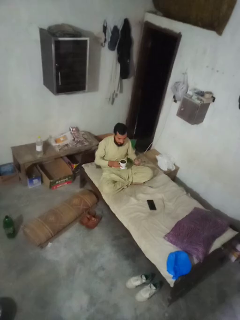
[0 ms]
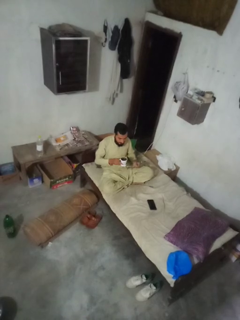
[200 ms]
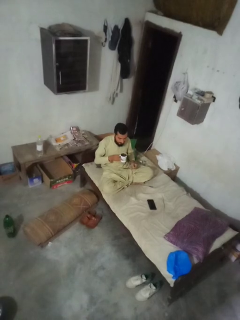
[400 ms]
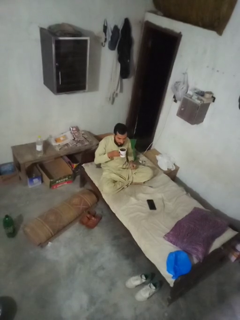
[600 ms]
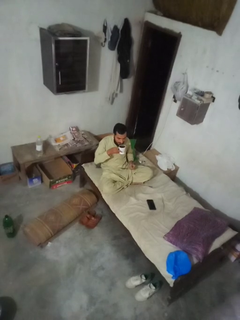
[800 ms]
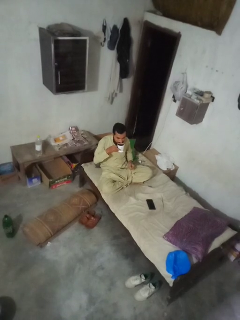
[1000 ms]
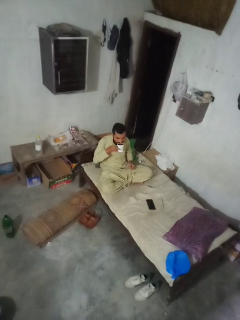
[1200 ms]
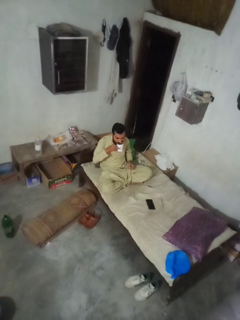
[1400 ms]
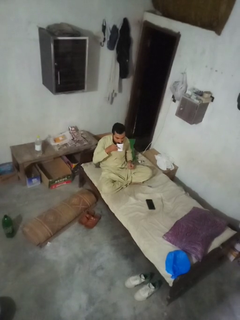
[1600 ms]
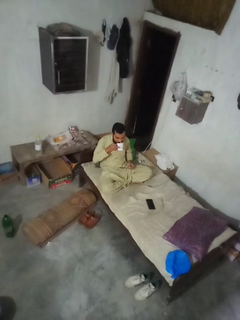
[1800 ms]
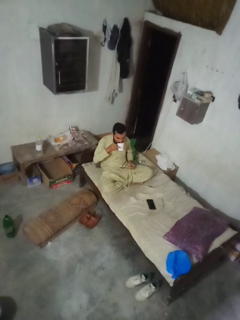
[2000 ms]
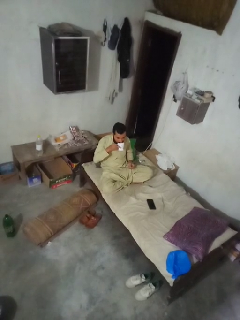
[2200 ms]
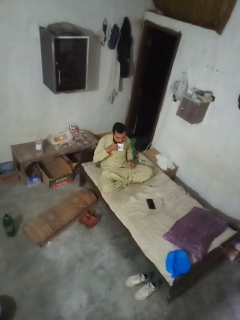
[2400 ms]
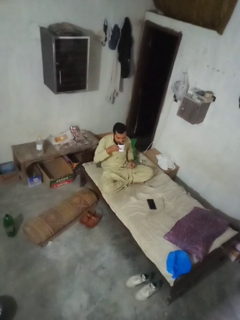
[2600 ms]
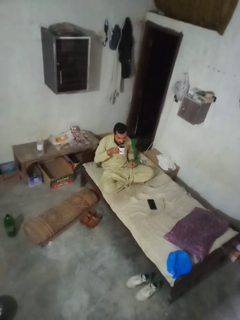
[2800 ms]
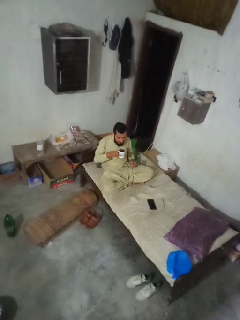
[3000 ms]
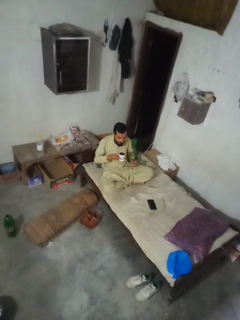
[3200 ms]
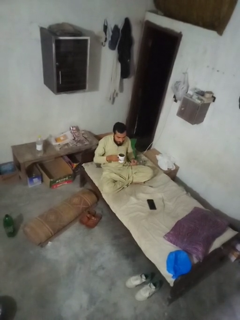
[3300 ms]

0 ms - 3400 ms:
person drinks from mug

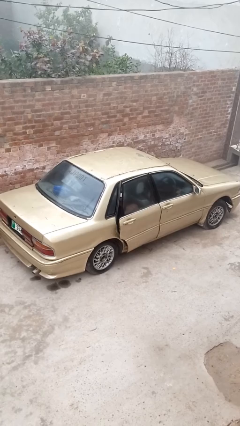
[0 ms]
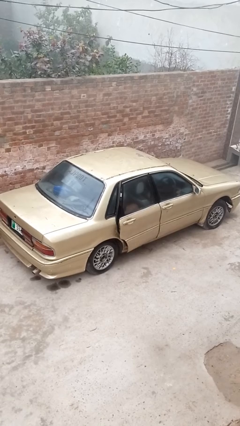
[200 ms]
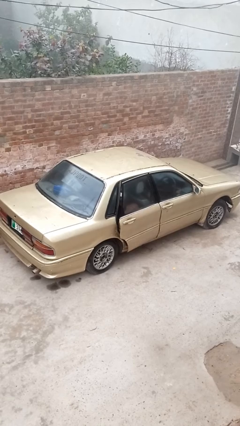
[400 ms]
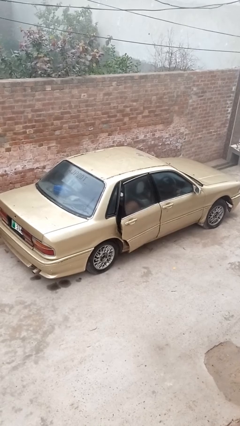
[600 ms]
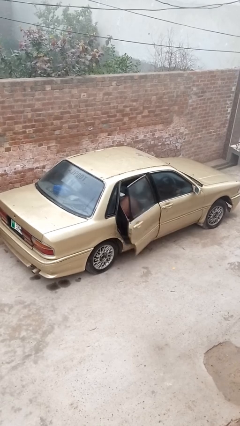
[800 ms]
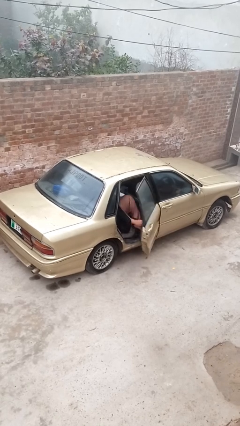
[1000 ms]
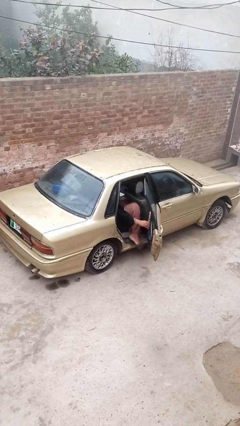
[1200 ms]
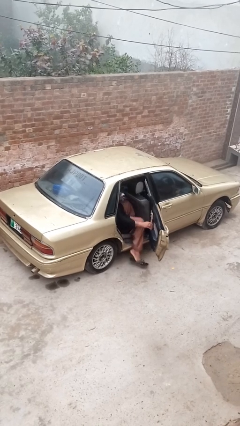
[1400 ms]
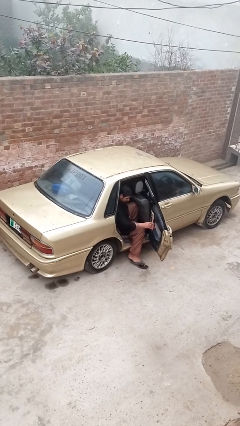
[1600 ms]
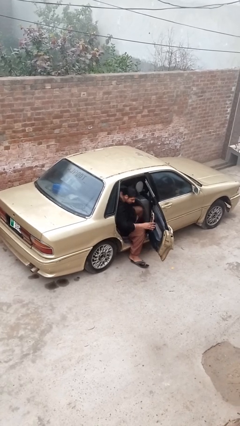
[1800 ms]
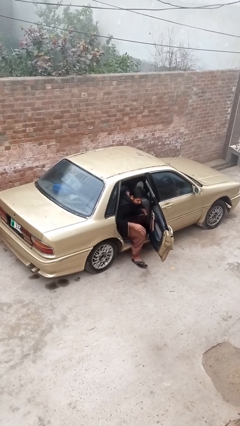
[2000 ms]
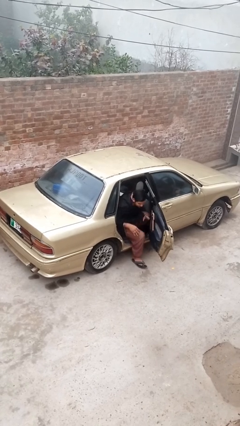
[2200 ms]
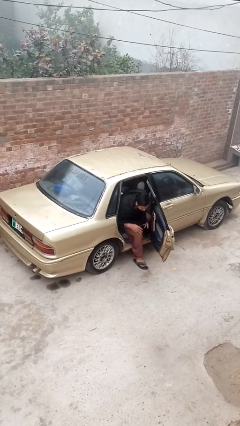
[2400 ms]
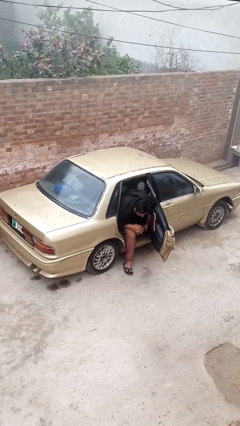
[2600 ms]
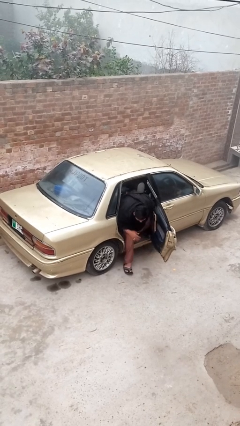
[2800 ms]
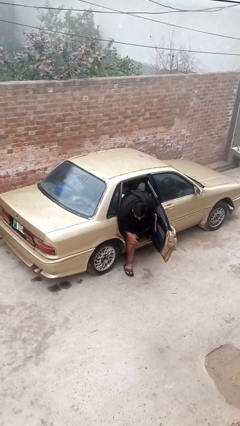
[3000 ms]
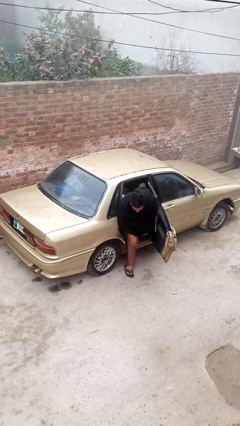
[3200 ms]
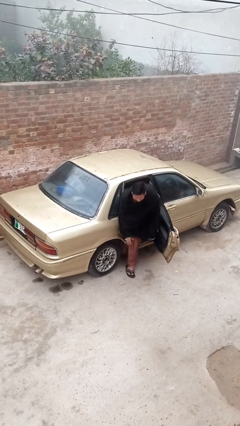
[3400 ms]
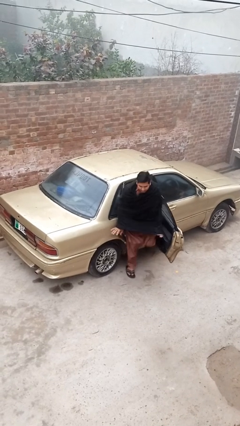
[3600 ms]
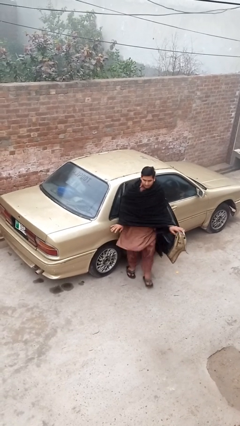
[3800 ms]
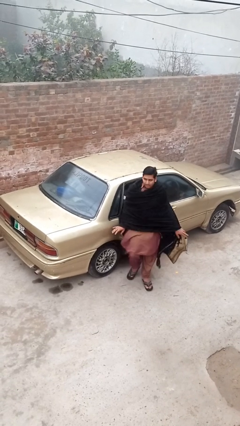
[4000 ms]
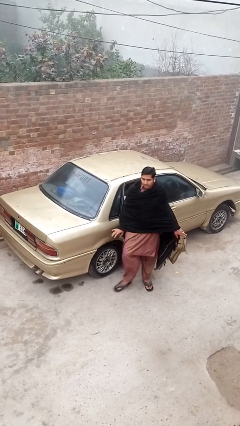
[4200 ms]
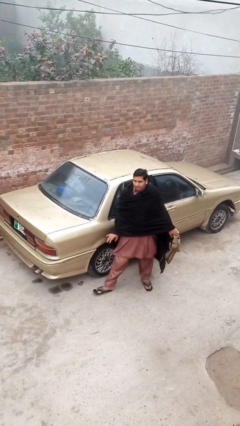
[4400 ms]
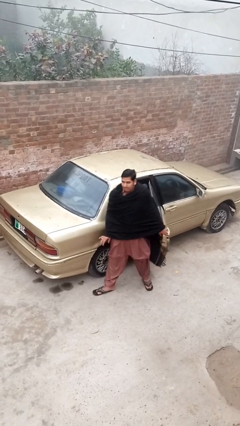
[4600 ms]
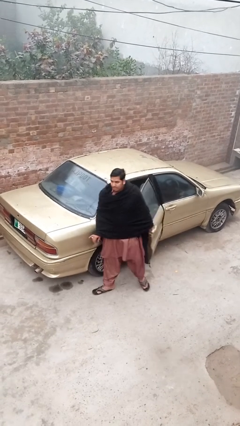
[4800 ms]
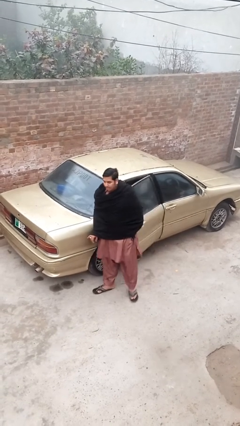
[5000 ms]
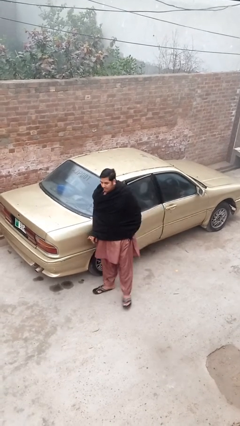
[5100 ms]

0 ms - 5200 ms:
car drops off person

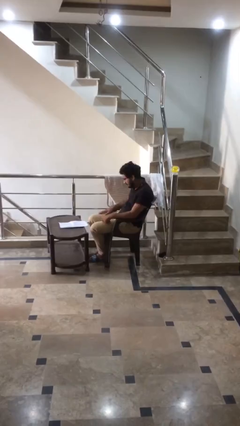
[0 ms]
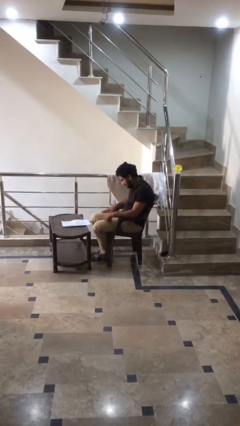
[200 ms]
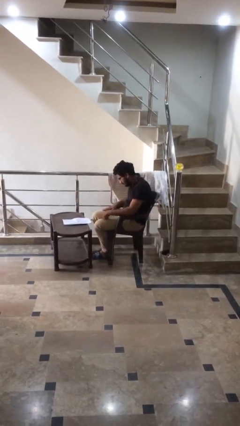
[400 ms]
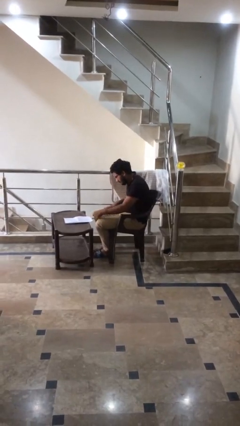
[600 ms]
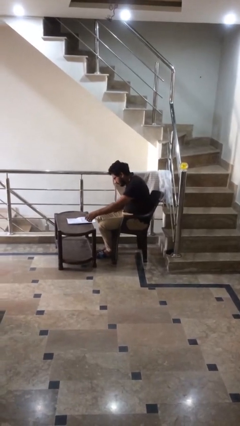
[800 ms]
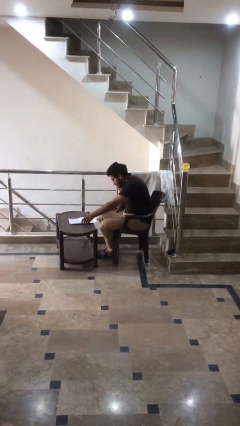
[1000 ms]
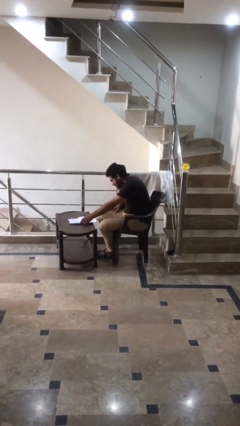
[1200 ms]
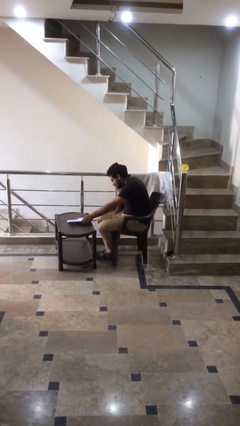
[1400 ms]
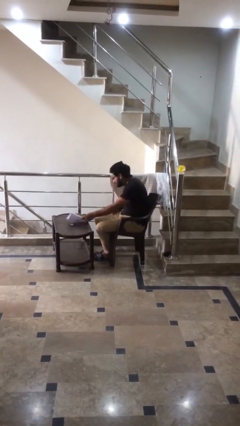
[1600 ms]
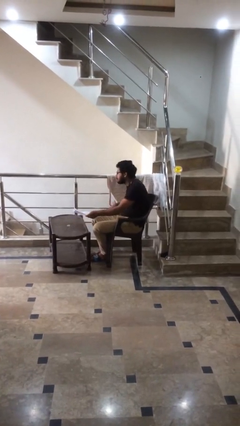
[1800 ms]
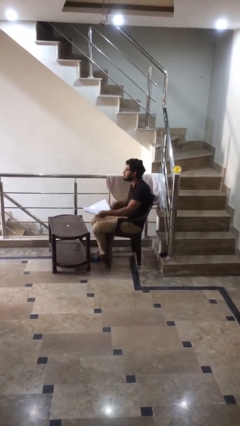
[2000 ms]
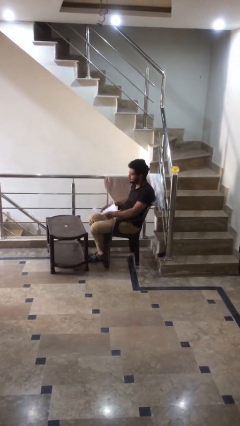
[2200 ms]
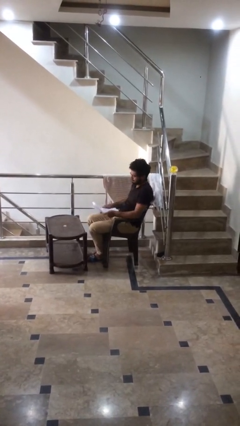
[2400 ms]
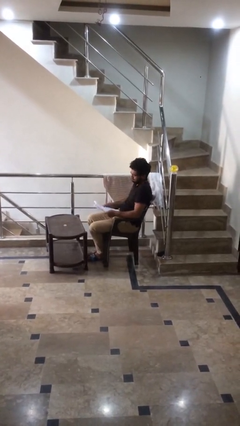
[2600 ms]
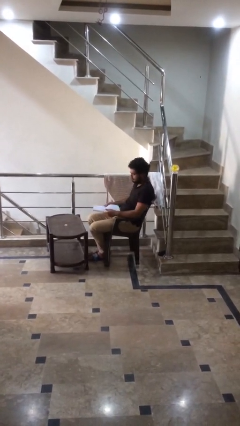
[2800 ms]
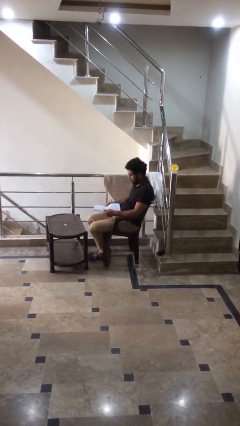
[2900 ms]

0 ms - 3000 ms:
person picks up object from table

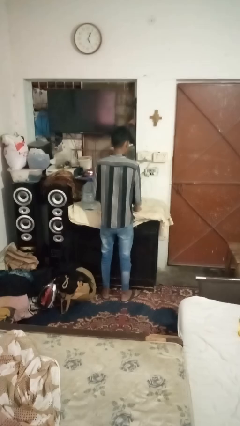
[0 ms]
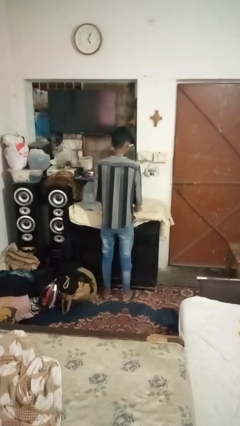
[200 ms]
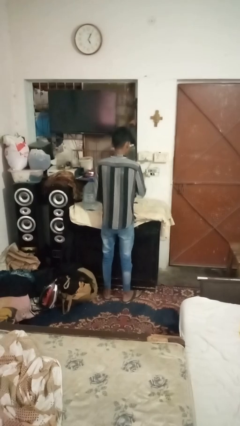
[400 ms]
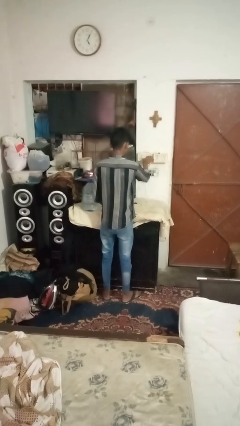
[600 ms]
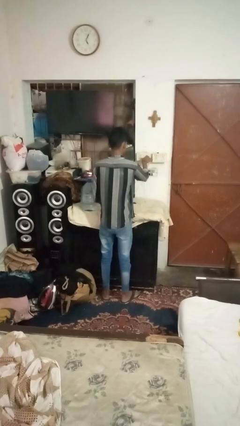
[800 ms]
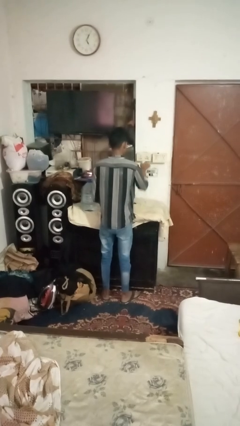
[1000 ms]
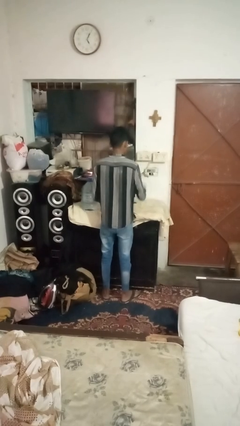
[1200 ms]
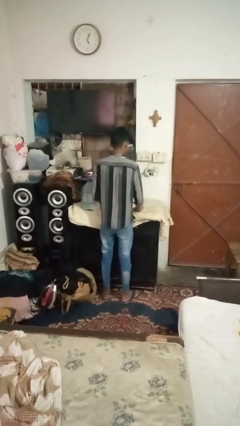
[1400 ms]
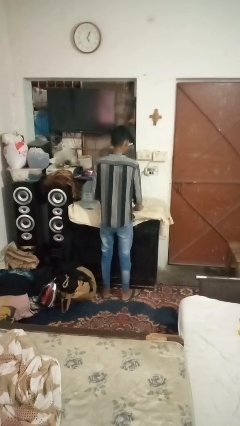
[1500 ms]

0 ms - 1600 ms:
person unplugs from electrical socket

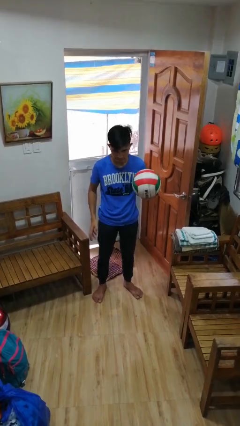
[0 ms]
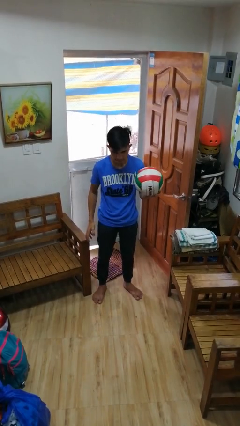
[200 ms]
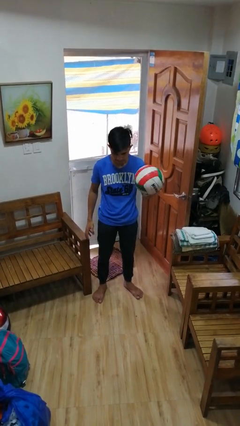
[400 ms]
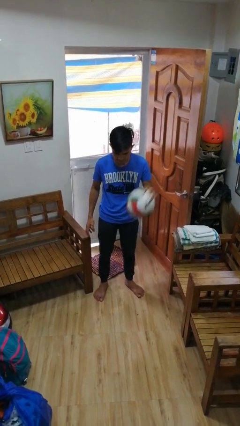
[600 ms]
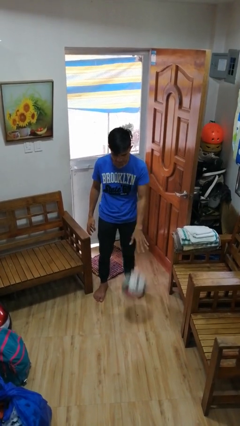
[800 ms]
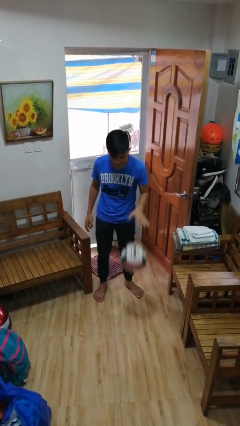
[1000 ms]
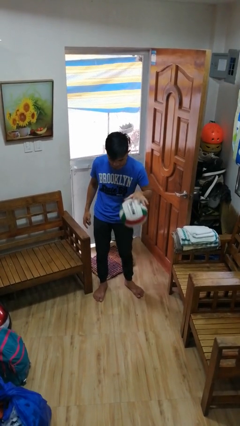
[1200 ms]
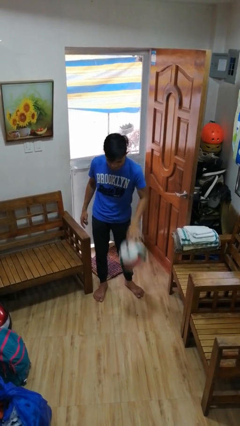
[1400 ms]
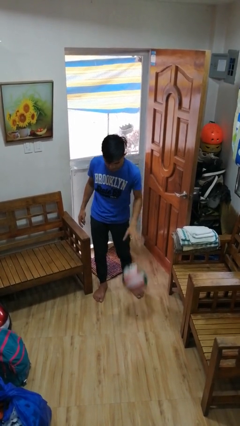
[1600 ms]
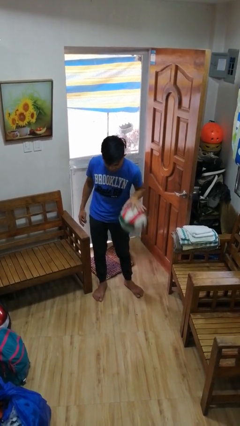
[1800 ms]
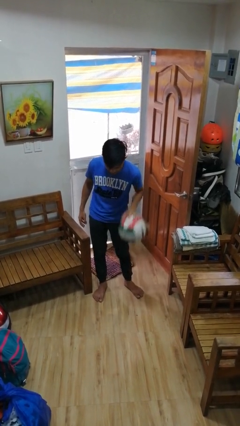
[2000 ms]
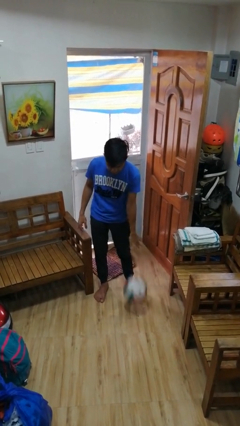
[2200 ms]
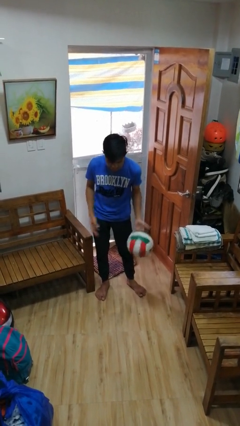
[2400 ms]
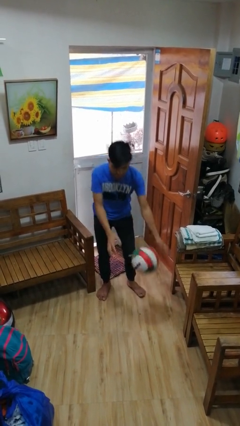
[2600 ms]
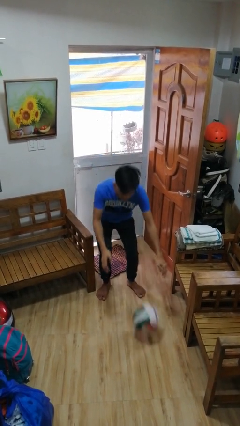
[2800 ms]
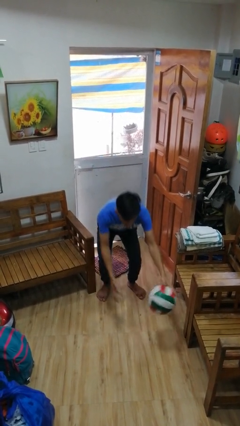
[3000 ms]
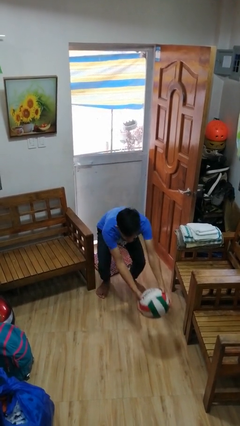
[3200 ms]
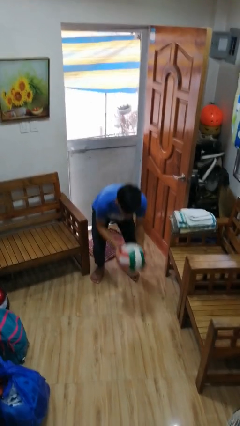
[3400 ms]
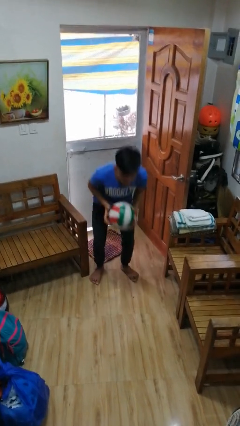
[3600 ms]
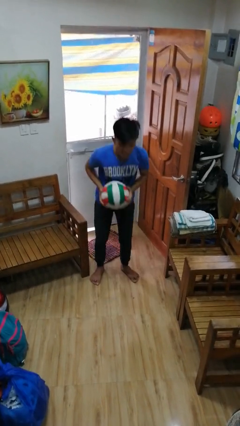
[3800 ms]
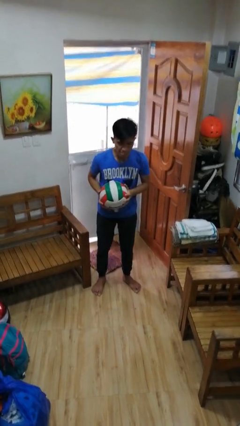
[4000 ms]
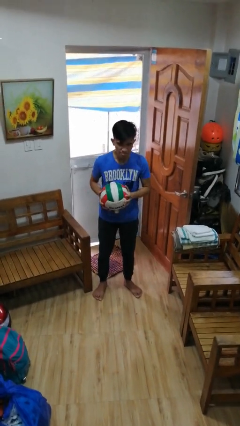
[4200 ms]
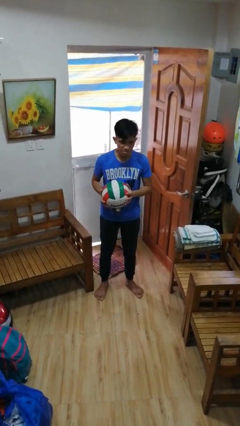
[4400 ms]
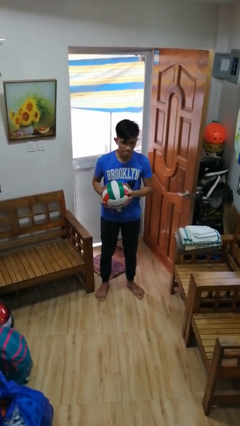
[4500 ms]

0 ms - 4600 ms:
person bounces ball on floor

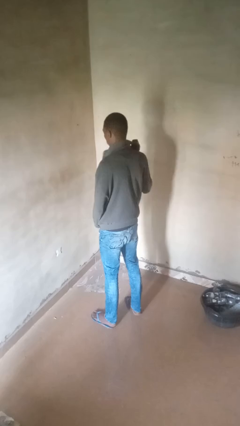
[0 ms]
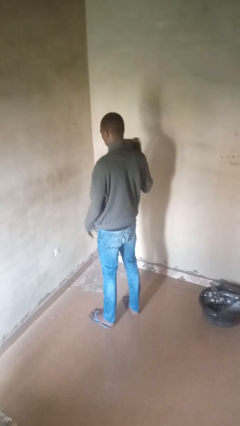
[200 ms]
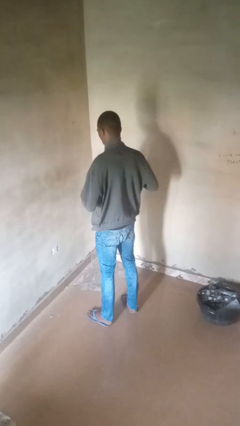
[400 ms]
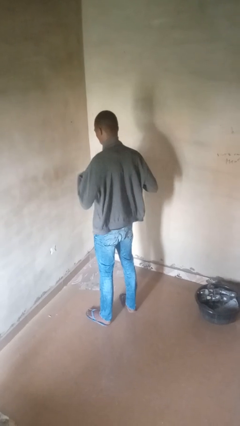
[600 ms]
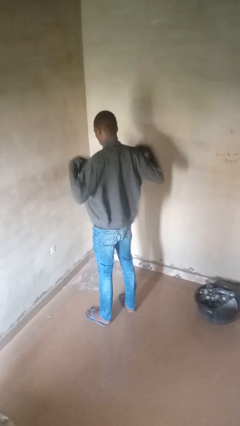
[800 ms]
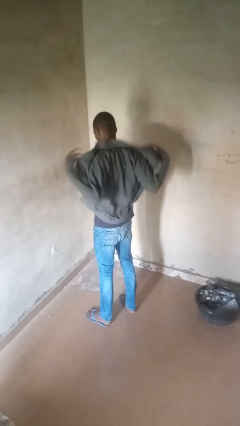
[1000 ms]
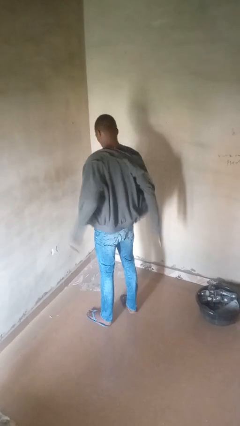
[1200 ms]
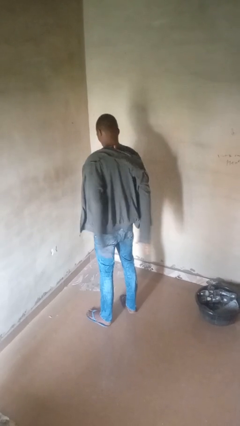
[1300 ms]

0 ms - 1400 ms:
person unzips jacket
